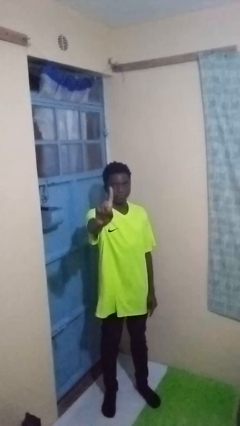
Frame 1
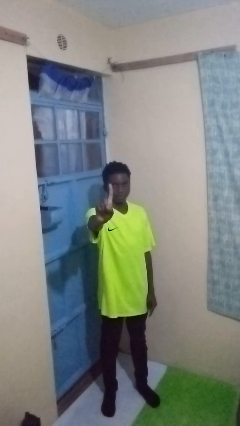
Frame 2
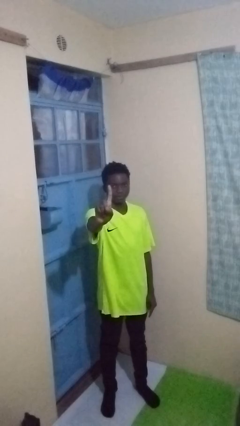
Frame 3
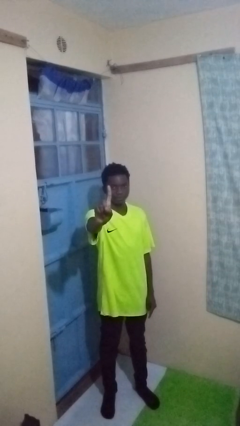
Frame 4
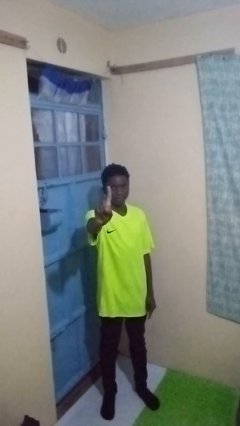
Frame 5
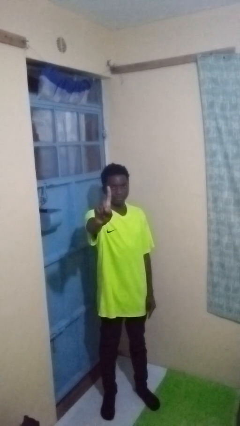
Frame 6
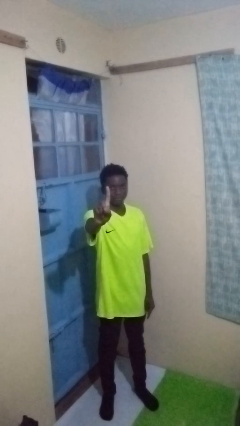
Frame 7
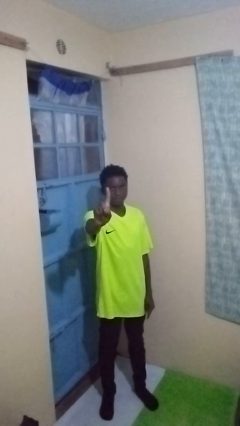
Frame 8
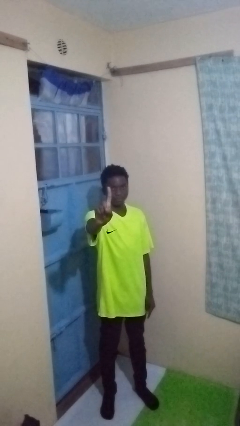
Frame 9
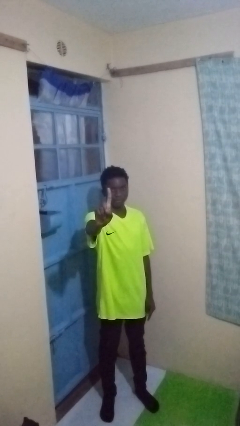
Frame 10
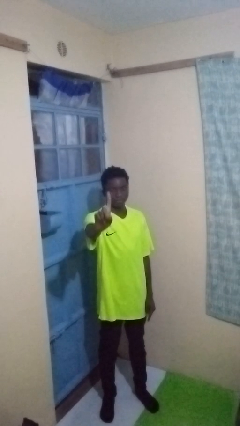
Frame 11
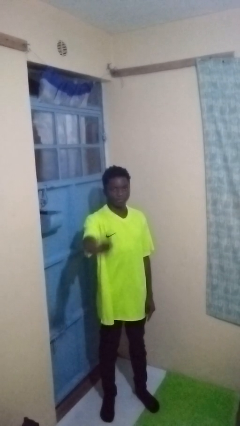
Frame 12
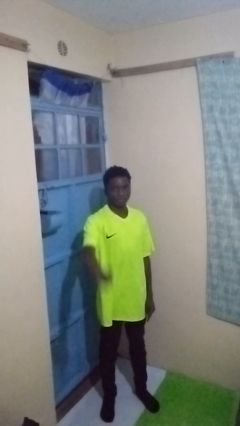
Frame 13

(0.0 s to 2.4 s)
person gestures number one

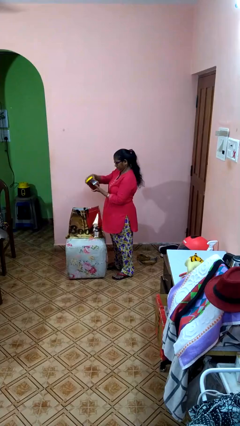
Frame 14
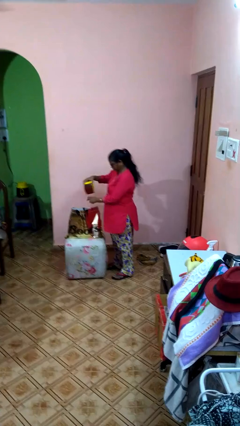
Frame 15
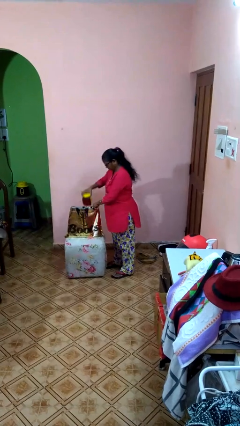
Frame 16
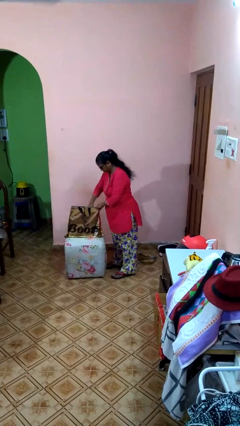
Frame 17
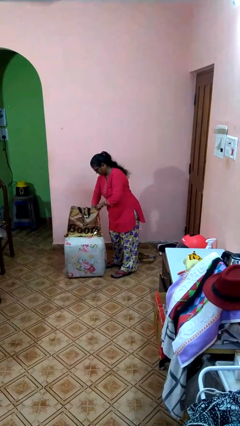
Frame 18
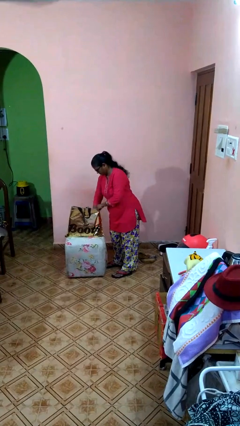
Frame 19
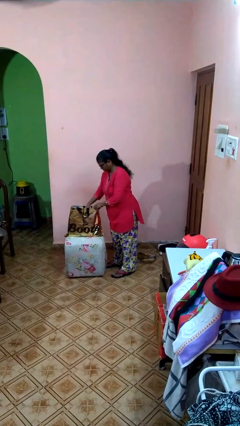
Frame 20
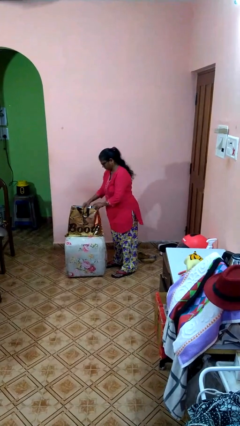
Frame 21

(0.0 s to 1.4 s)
person puts object into bag

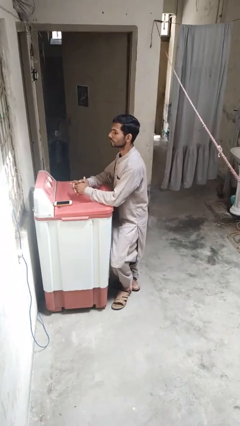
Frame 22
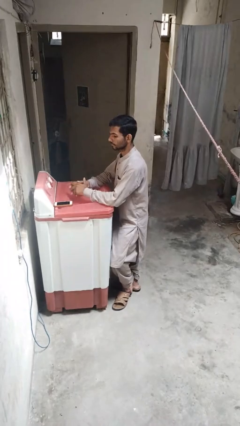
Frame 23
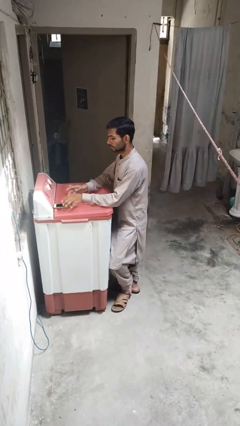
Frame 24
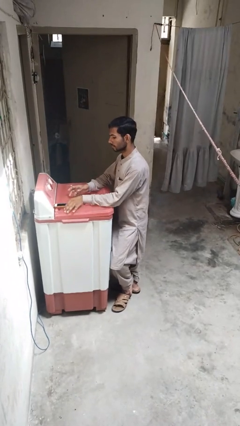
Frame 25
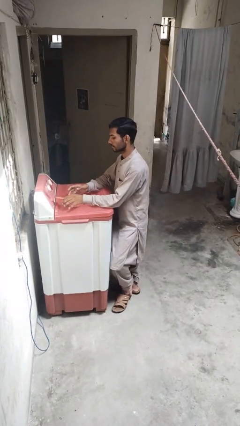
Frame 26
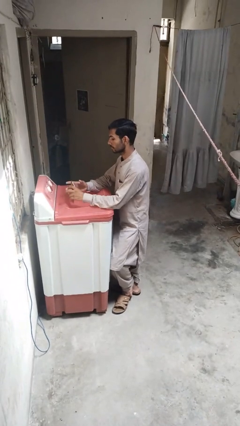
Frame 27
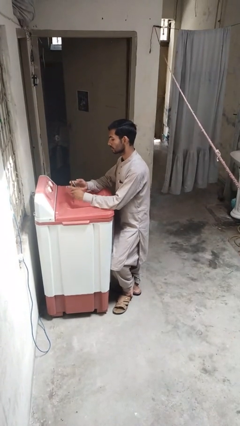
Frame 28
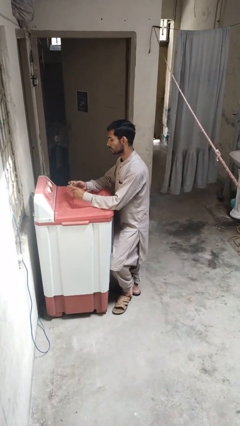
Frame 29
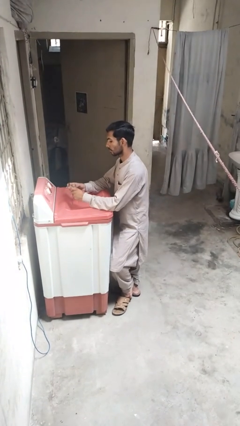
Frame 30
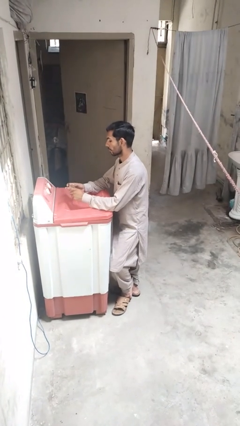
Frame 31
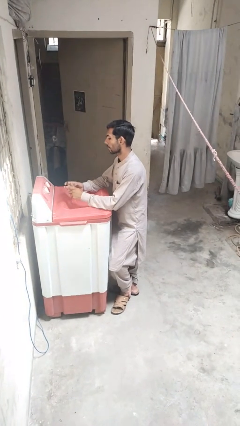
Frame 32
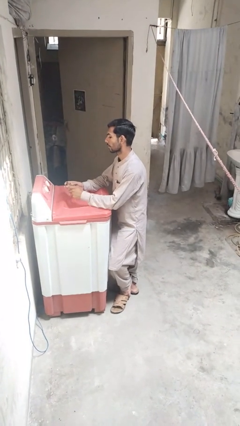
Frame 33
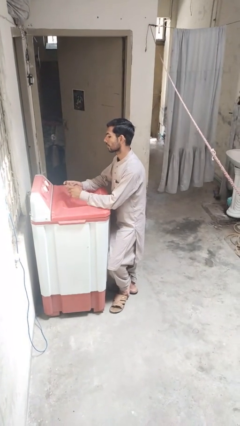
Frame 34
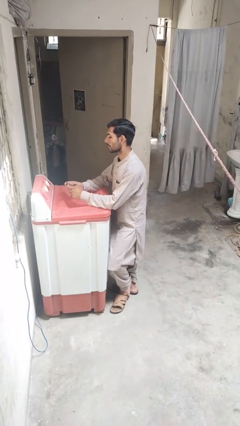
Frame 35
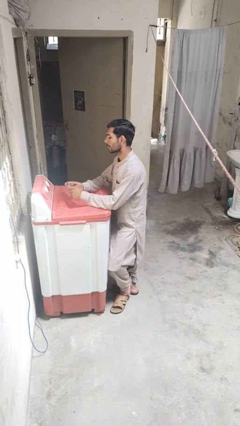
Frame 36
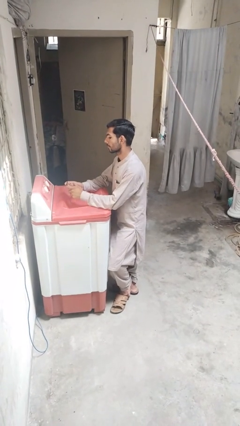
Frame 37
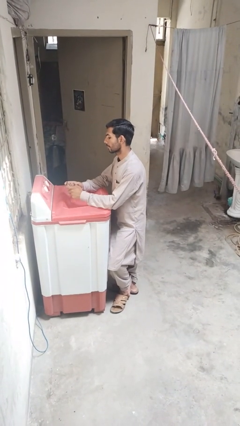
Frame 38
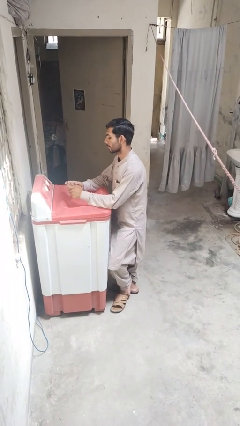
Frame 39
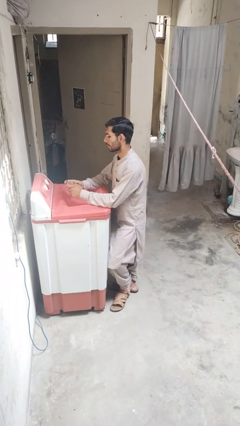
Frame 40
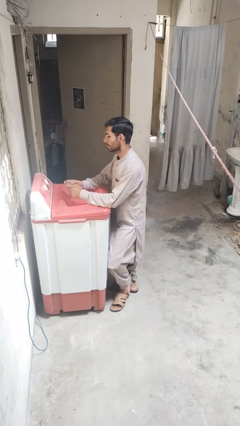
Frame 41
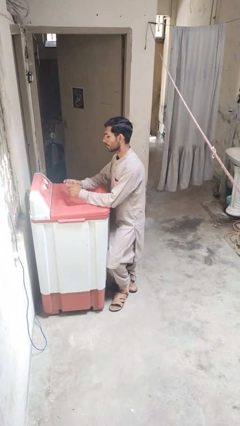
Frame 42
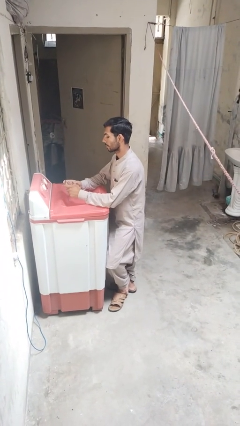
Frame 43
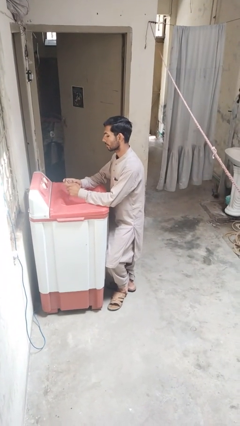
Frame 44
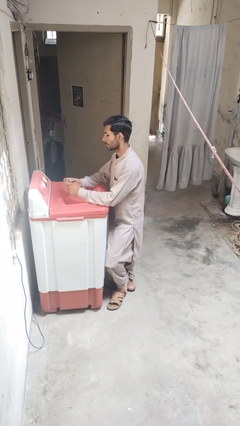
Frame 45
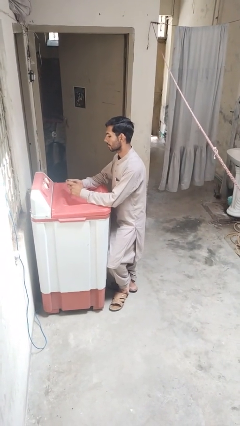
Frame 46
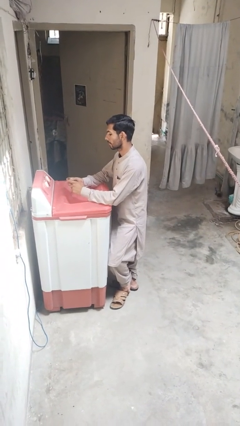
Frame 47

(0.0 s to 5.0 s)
person interacts with tablet

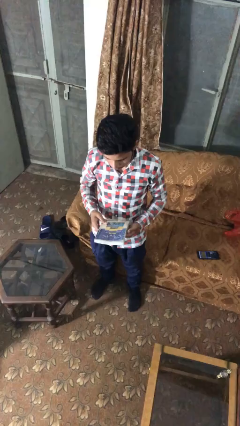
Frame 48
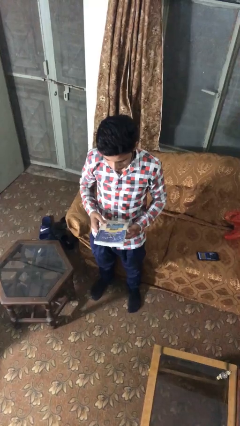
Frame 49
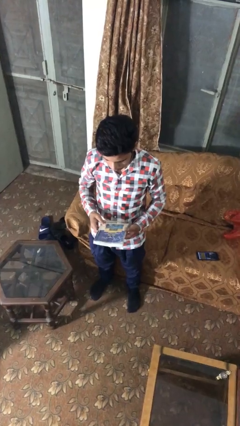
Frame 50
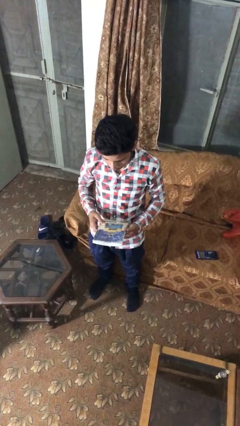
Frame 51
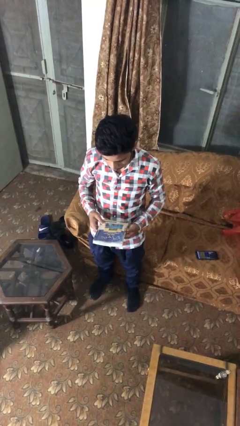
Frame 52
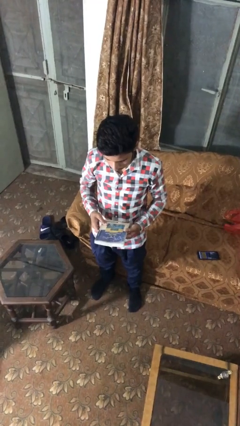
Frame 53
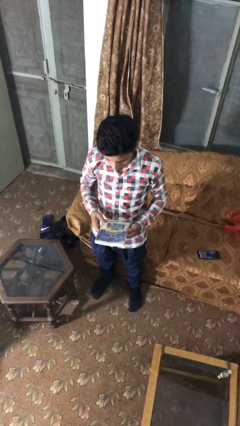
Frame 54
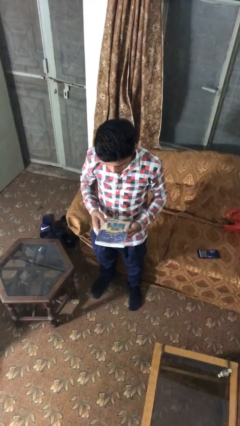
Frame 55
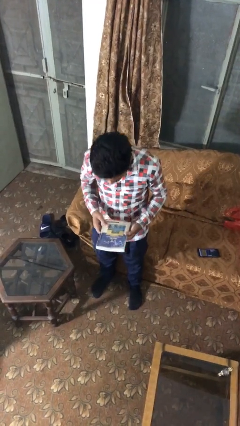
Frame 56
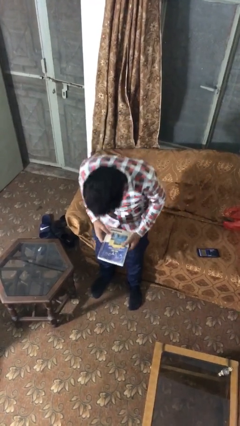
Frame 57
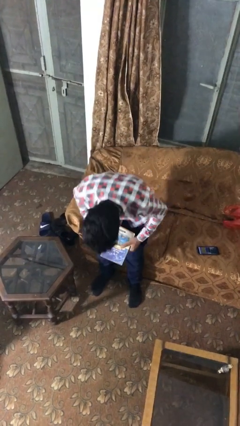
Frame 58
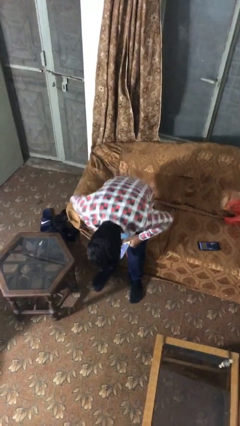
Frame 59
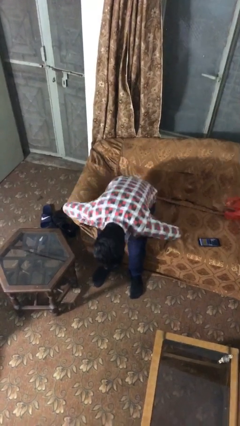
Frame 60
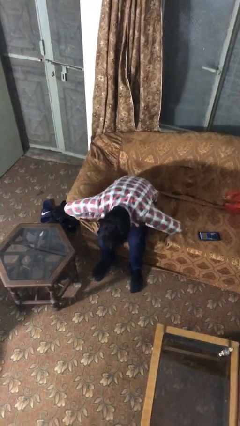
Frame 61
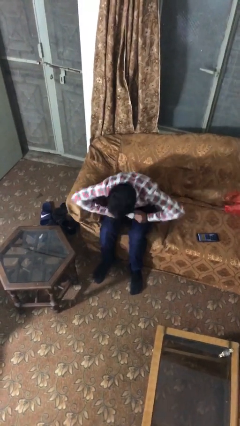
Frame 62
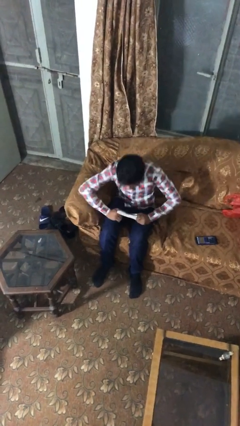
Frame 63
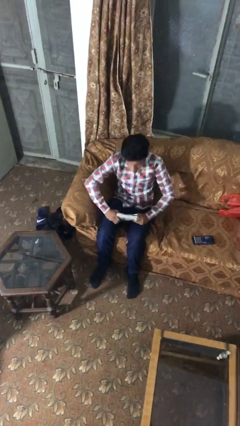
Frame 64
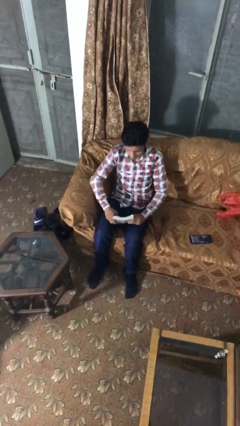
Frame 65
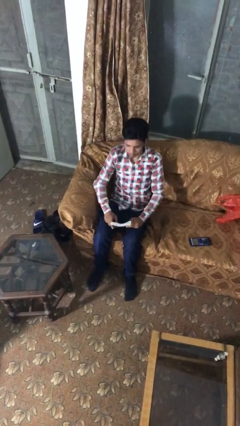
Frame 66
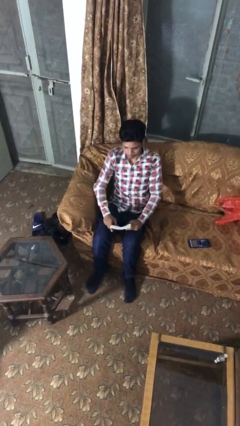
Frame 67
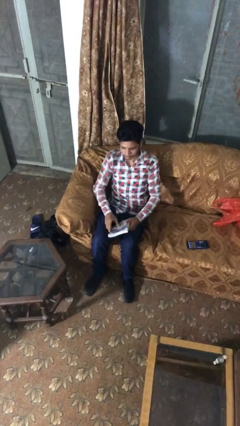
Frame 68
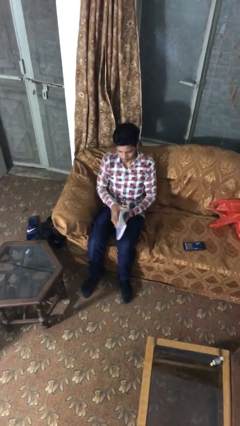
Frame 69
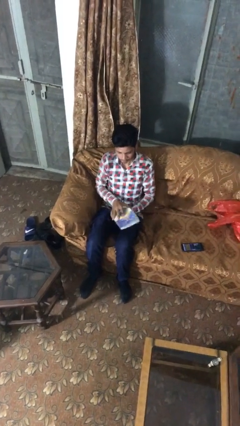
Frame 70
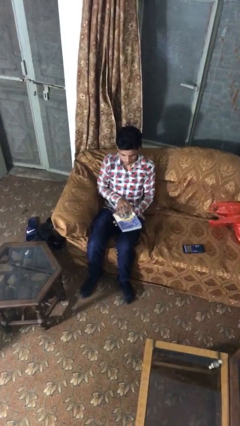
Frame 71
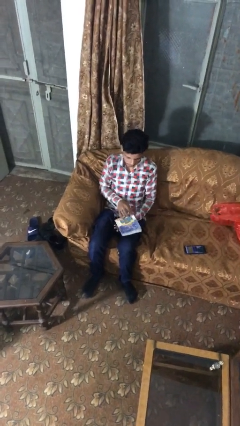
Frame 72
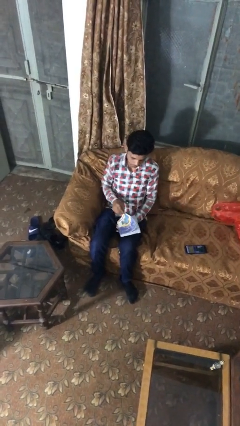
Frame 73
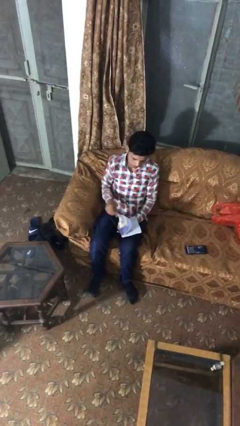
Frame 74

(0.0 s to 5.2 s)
person sits down

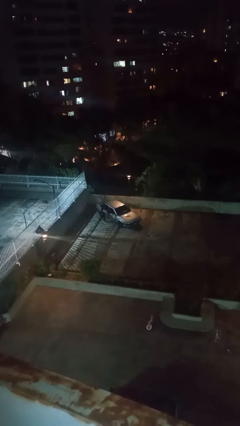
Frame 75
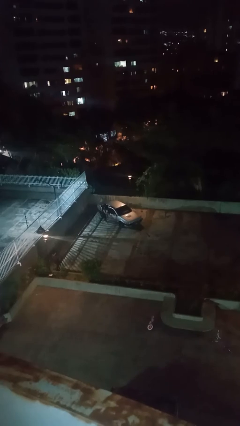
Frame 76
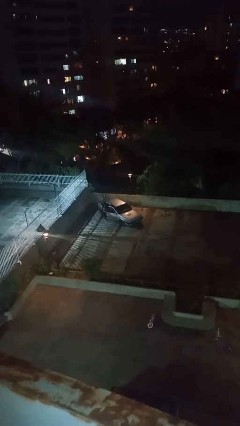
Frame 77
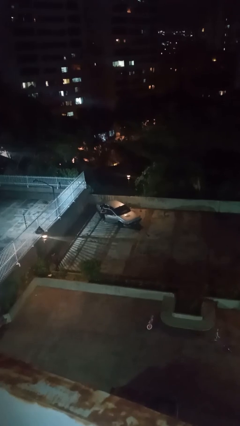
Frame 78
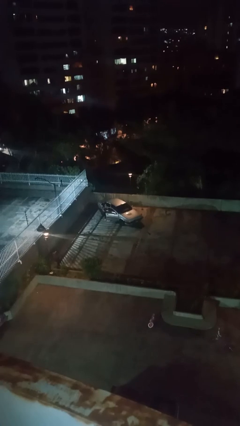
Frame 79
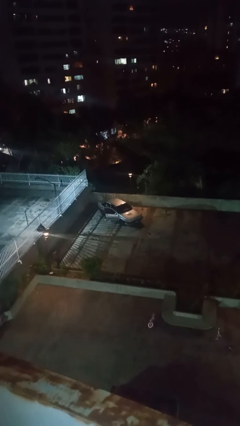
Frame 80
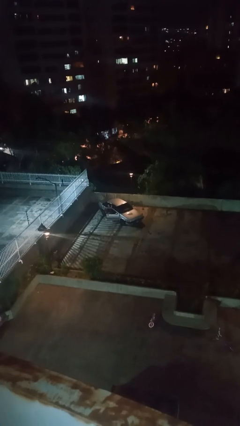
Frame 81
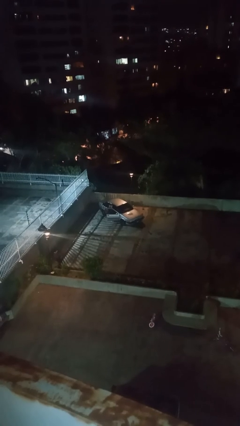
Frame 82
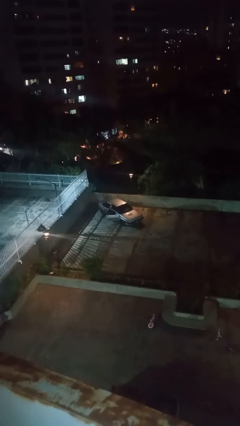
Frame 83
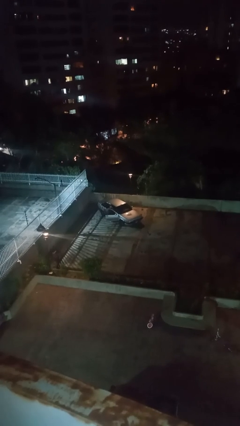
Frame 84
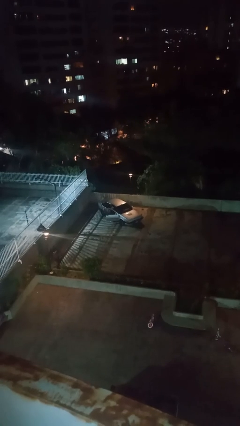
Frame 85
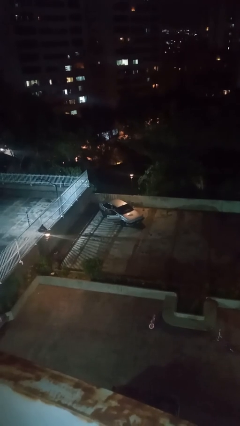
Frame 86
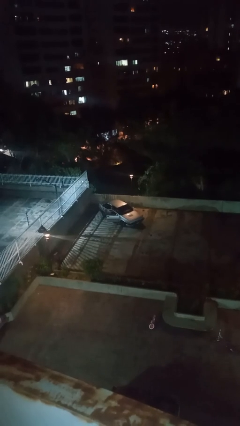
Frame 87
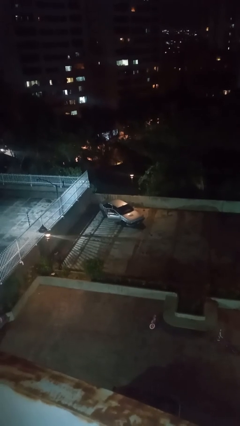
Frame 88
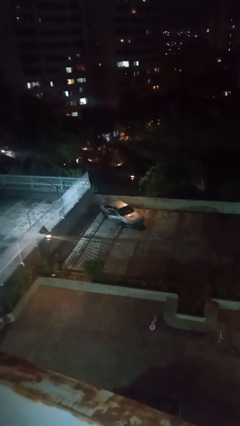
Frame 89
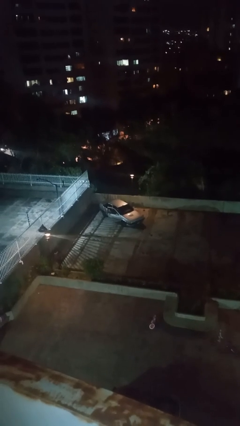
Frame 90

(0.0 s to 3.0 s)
car picks up person

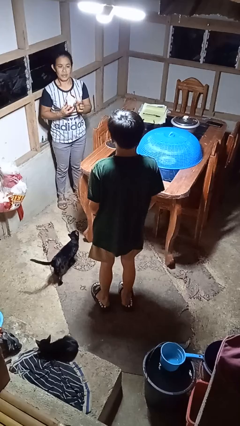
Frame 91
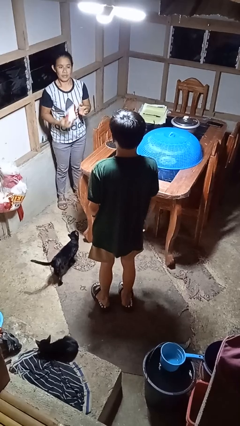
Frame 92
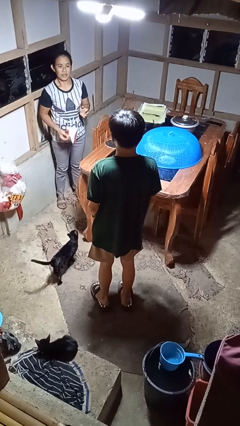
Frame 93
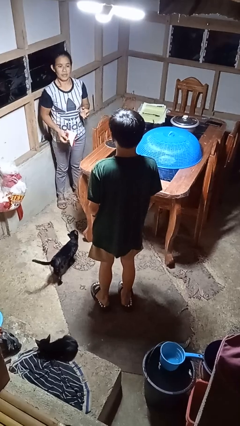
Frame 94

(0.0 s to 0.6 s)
person catches object from person
